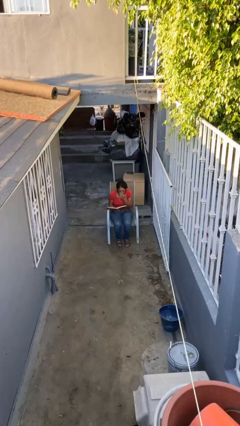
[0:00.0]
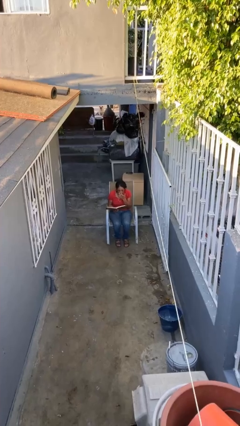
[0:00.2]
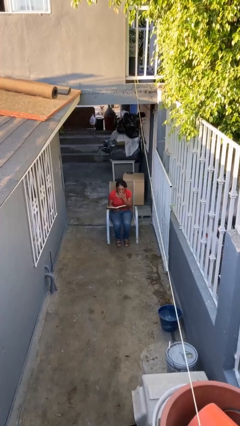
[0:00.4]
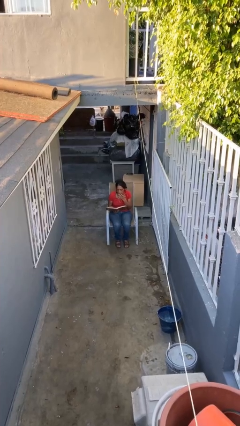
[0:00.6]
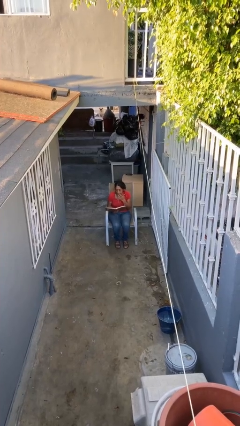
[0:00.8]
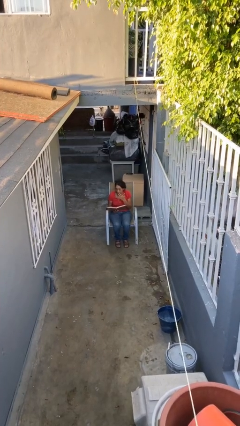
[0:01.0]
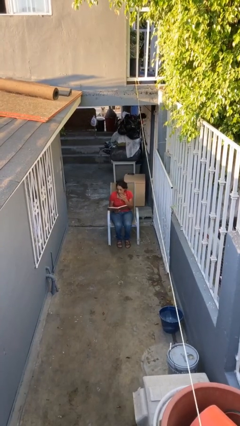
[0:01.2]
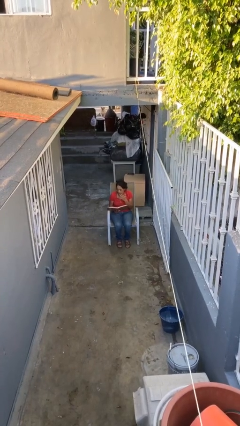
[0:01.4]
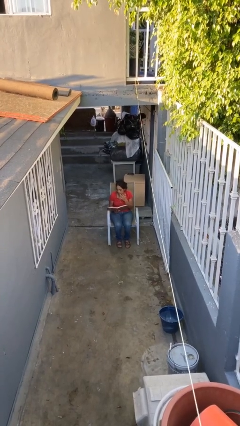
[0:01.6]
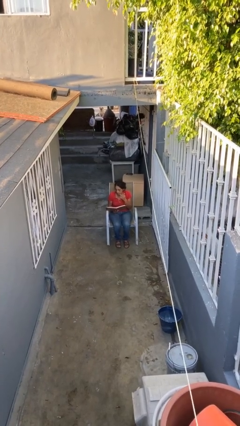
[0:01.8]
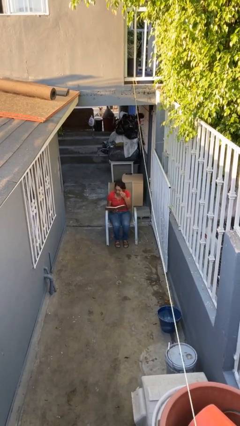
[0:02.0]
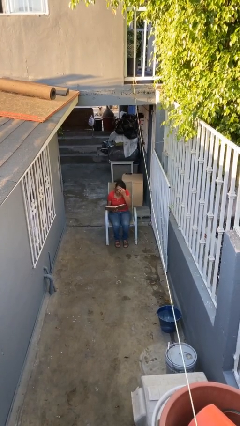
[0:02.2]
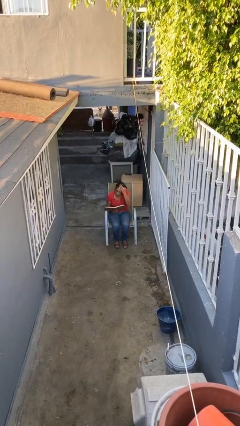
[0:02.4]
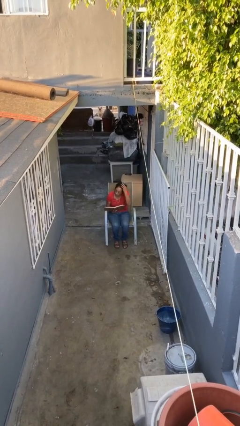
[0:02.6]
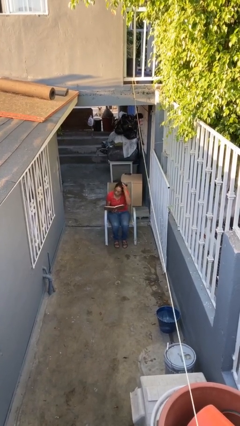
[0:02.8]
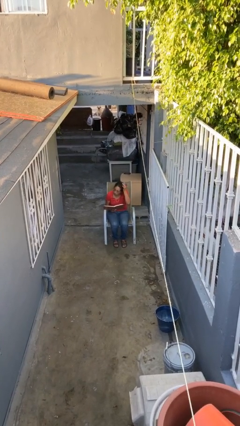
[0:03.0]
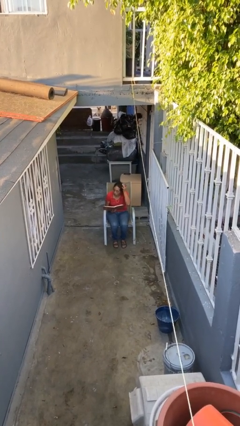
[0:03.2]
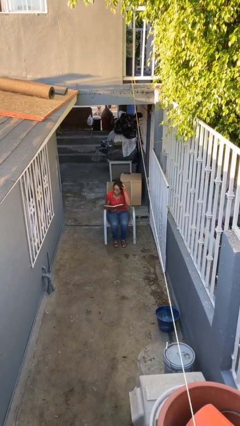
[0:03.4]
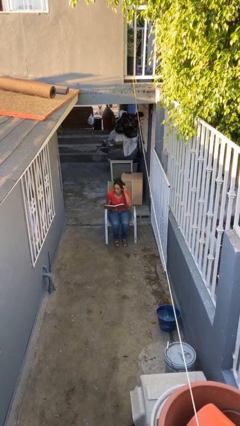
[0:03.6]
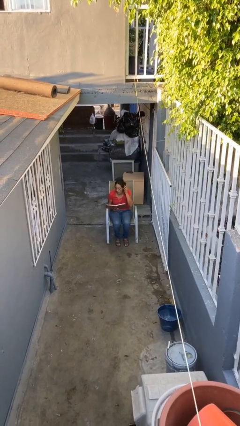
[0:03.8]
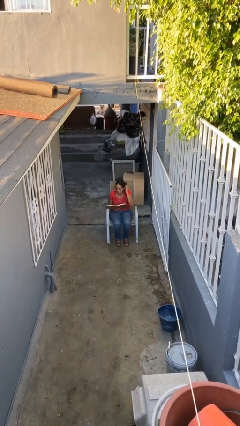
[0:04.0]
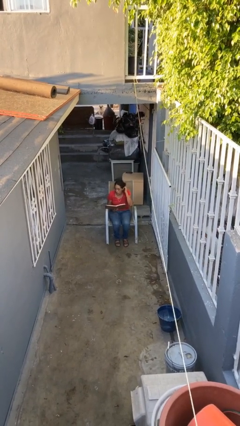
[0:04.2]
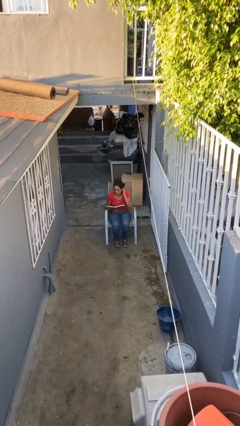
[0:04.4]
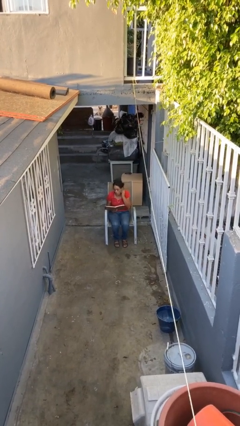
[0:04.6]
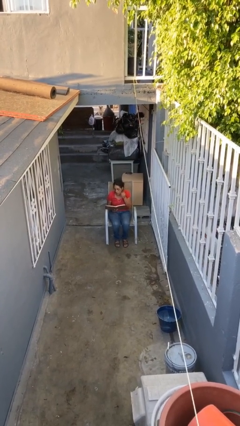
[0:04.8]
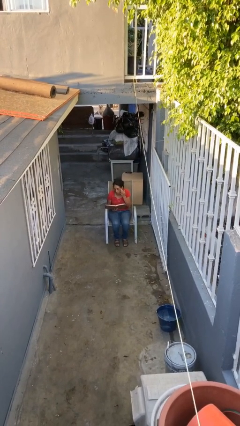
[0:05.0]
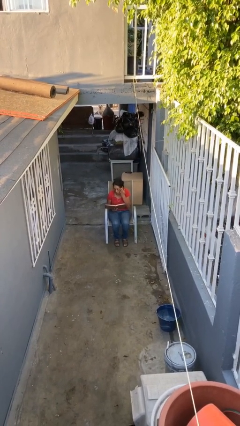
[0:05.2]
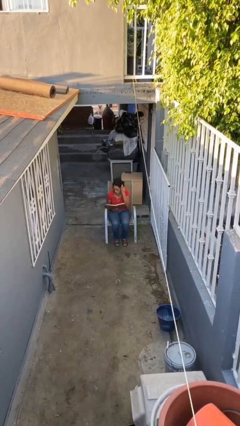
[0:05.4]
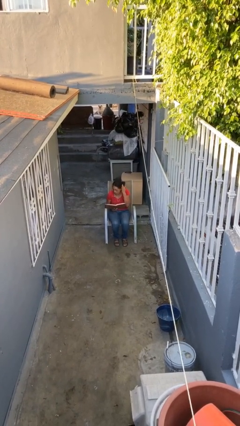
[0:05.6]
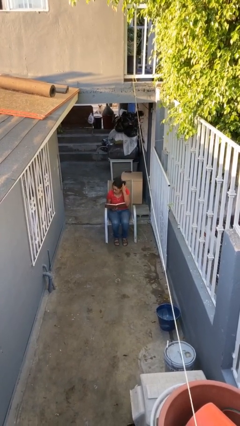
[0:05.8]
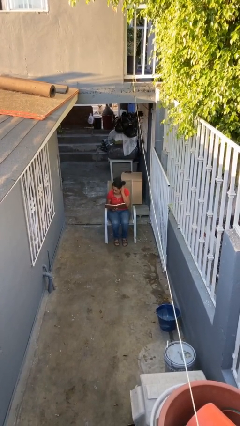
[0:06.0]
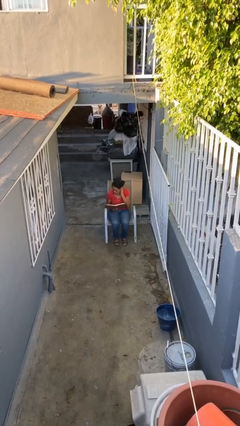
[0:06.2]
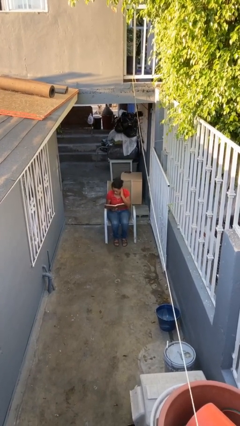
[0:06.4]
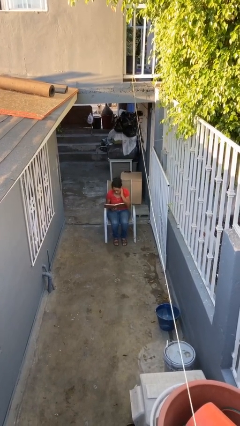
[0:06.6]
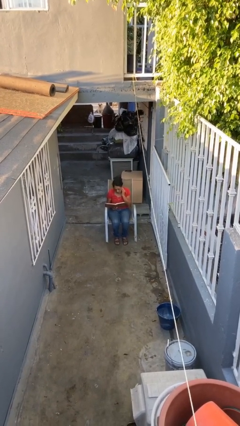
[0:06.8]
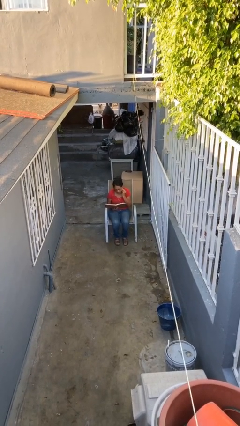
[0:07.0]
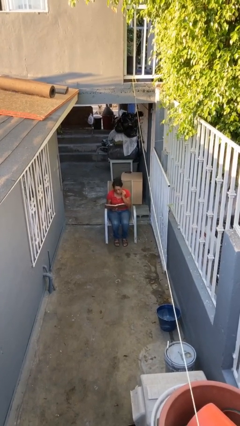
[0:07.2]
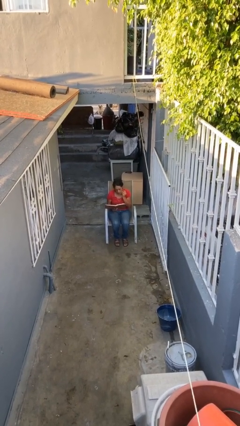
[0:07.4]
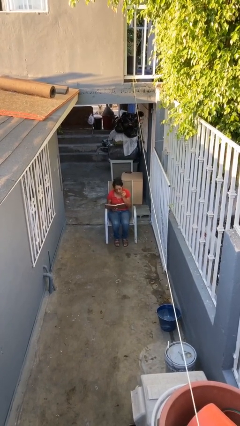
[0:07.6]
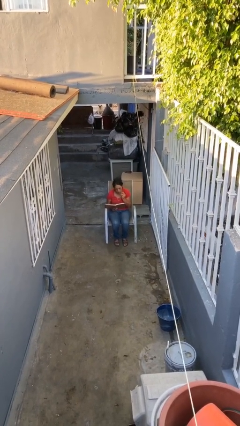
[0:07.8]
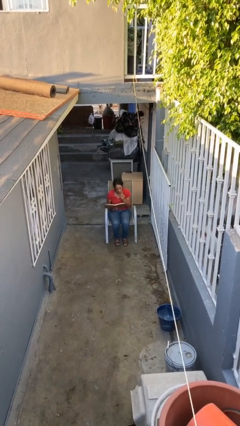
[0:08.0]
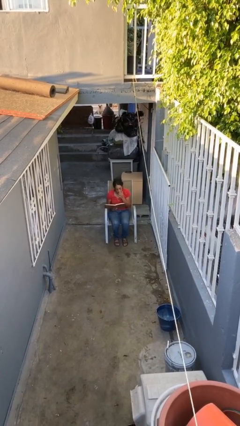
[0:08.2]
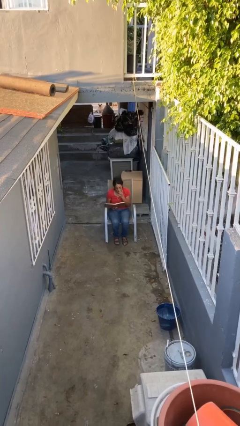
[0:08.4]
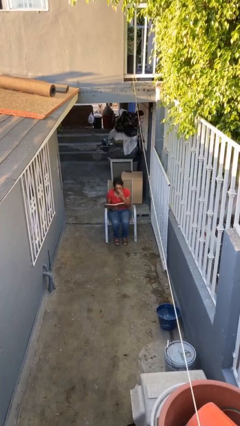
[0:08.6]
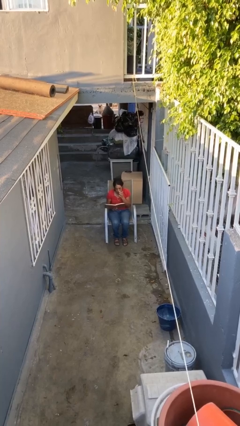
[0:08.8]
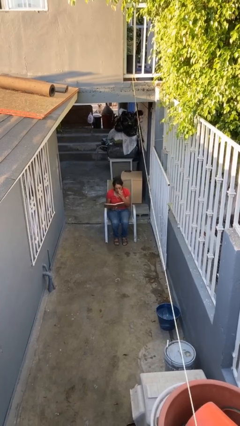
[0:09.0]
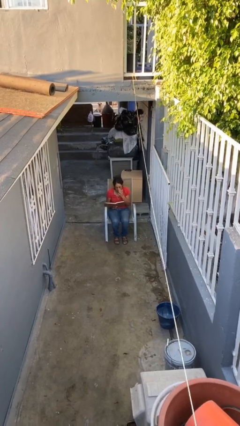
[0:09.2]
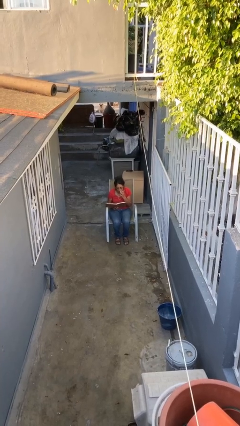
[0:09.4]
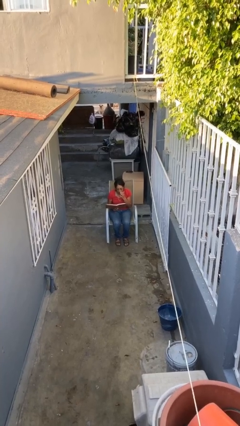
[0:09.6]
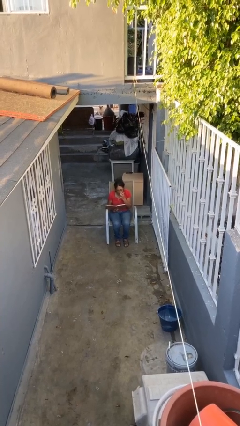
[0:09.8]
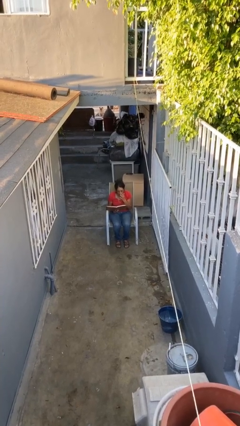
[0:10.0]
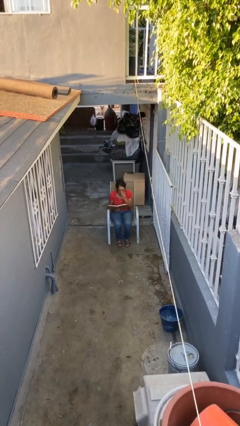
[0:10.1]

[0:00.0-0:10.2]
person reads document

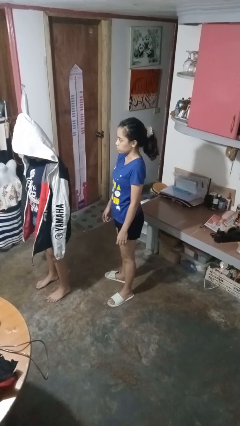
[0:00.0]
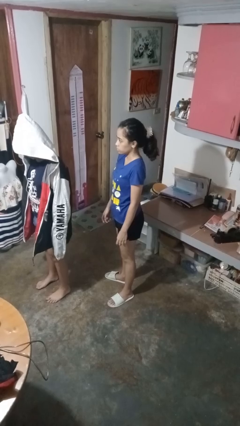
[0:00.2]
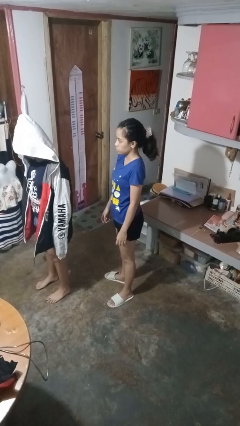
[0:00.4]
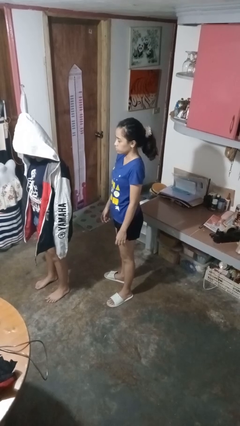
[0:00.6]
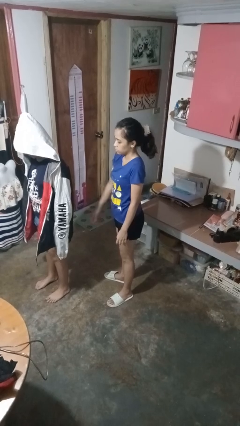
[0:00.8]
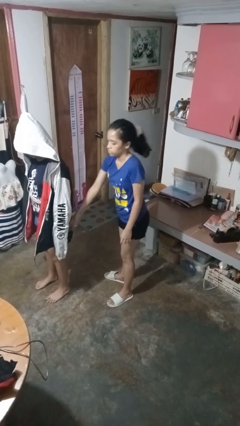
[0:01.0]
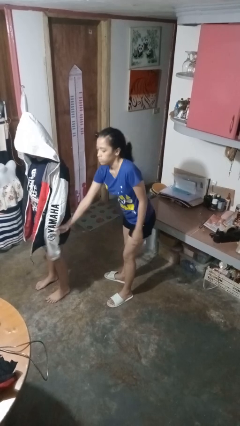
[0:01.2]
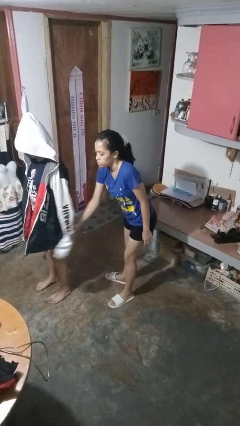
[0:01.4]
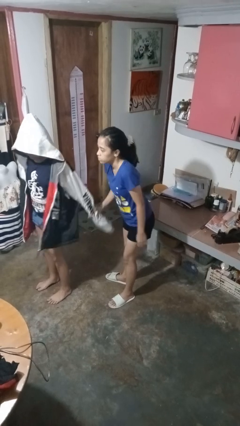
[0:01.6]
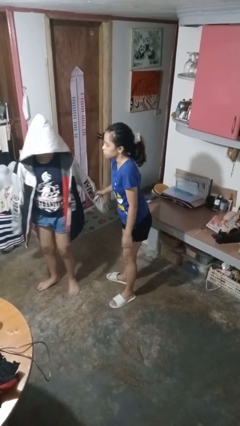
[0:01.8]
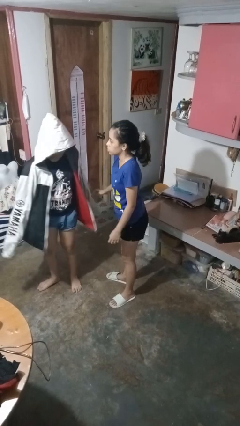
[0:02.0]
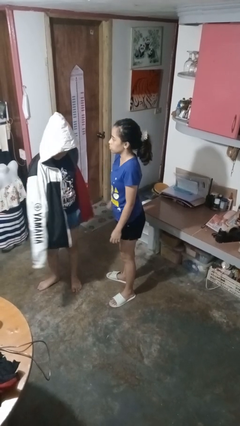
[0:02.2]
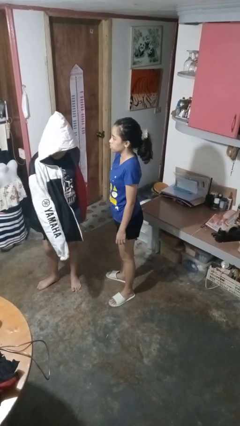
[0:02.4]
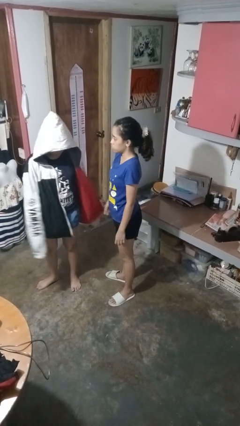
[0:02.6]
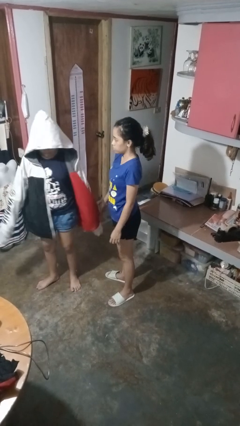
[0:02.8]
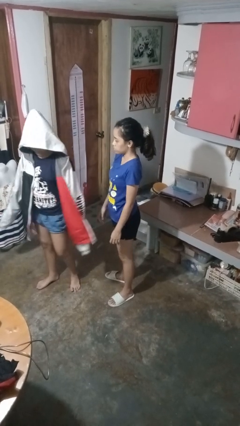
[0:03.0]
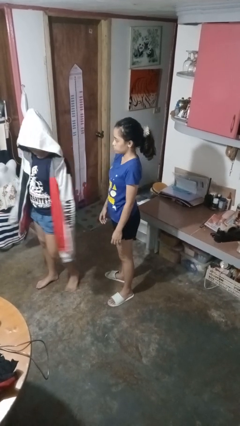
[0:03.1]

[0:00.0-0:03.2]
person grabs person by forearm

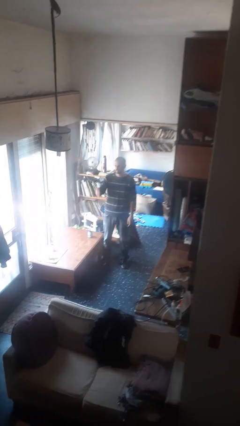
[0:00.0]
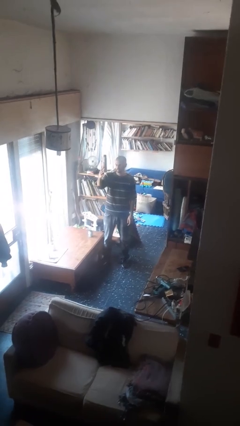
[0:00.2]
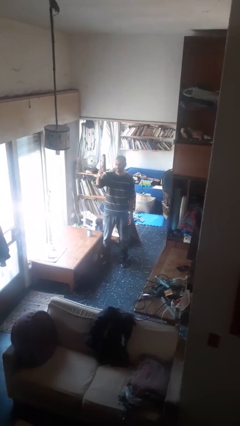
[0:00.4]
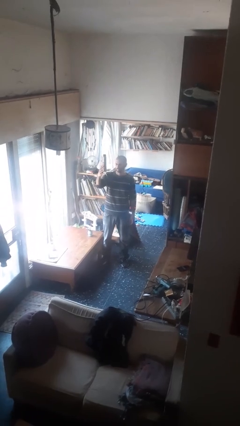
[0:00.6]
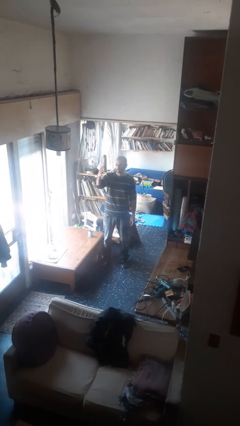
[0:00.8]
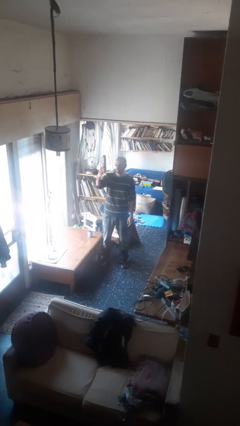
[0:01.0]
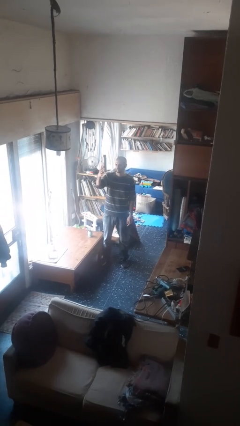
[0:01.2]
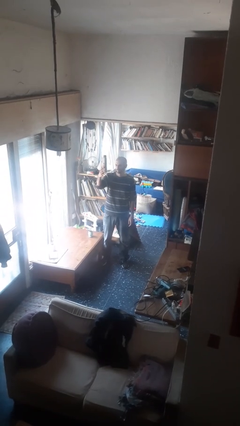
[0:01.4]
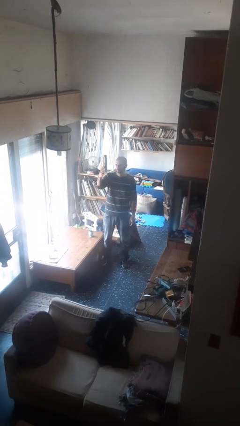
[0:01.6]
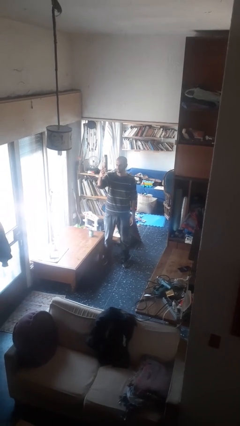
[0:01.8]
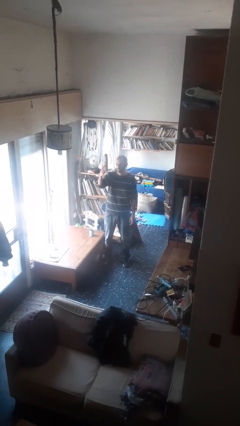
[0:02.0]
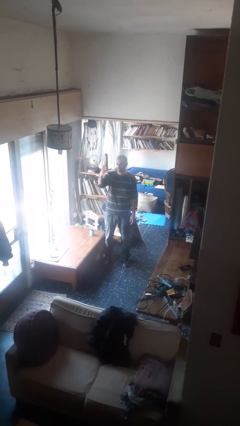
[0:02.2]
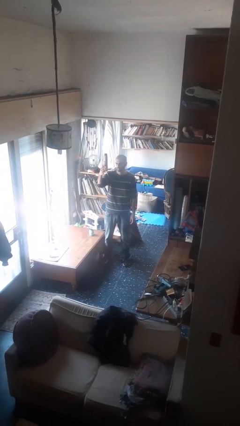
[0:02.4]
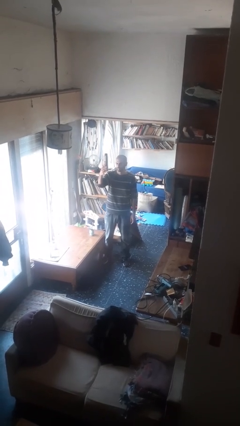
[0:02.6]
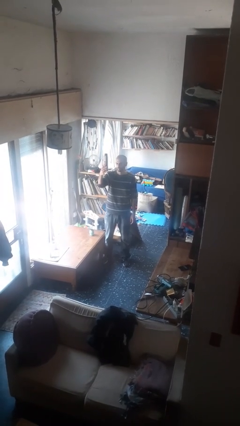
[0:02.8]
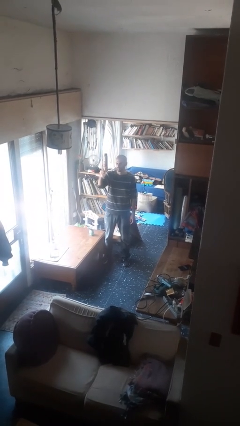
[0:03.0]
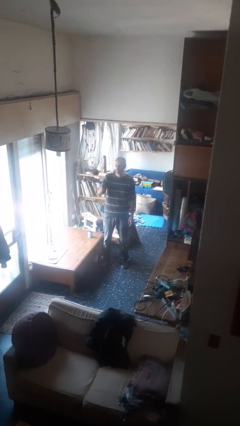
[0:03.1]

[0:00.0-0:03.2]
person gestures number four

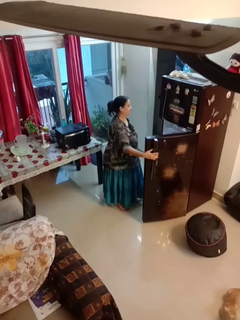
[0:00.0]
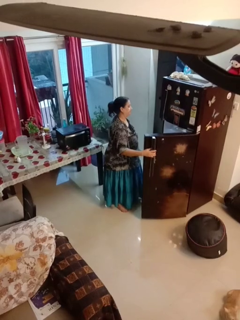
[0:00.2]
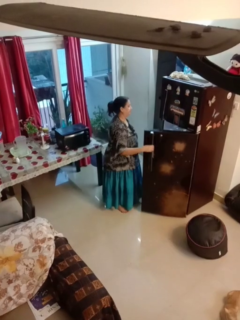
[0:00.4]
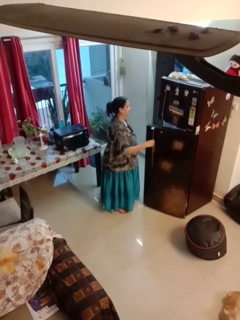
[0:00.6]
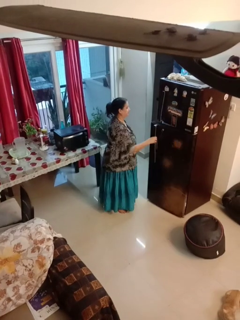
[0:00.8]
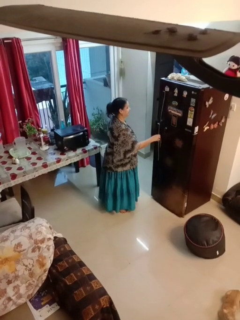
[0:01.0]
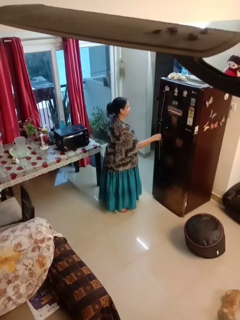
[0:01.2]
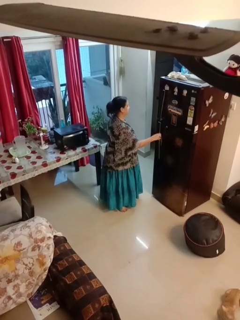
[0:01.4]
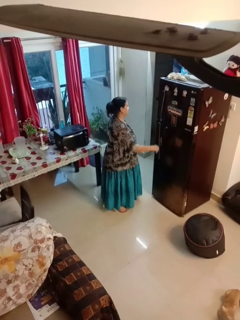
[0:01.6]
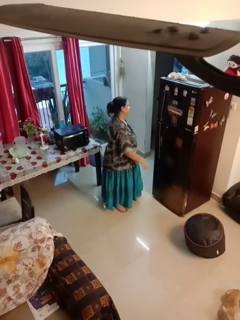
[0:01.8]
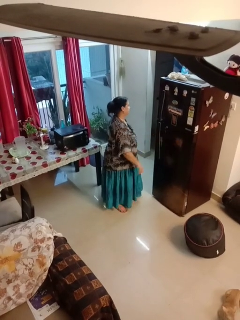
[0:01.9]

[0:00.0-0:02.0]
person closes refrigerator

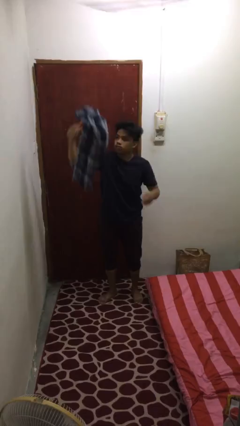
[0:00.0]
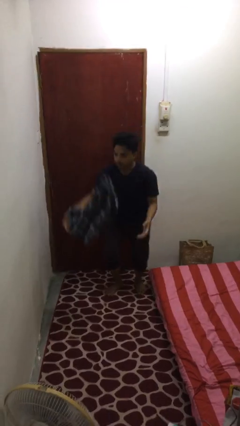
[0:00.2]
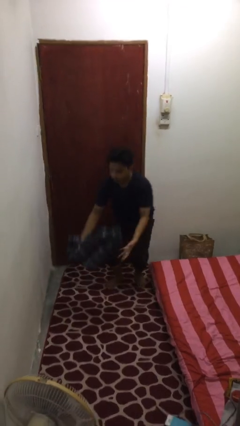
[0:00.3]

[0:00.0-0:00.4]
person drops object
